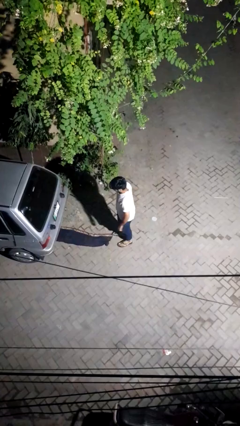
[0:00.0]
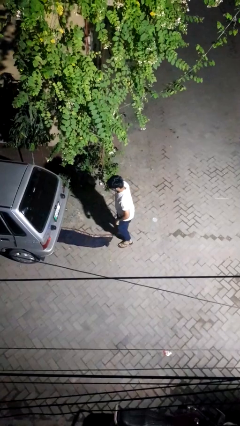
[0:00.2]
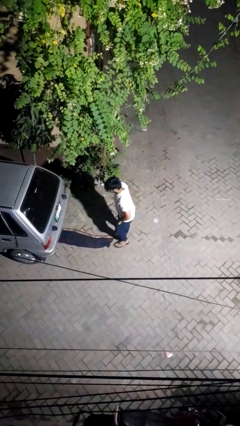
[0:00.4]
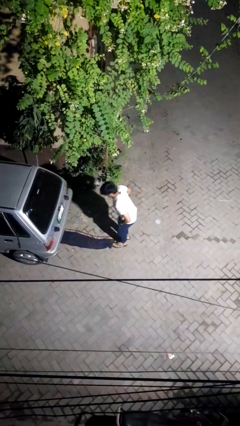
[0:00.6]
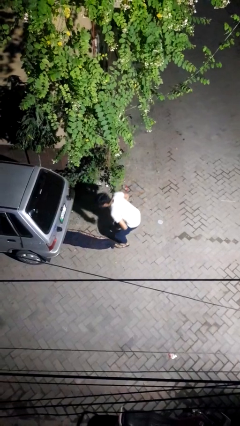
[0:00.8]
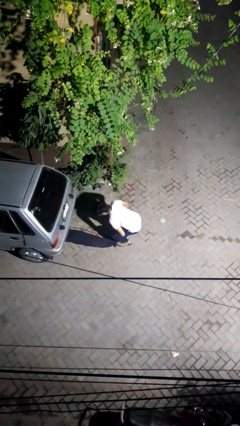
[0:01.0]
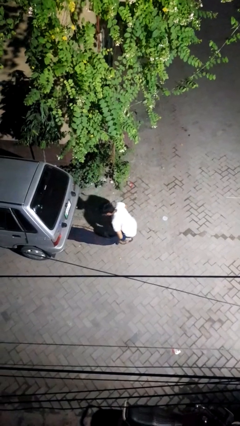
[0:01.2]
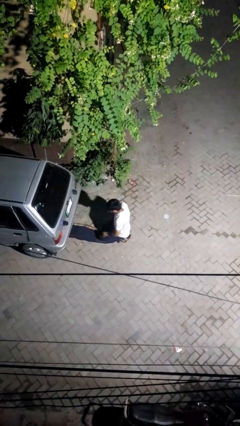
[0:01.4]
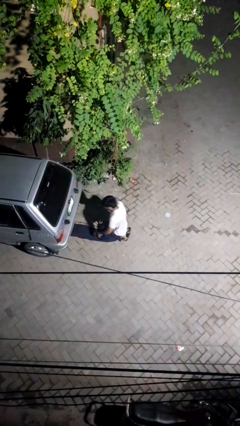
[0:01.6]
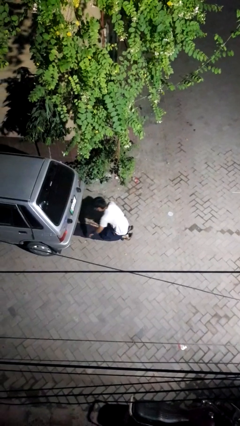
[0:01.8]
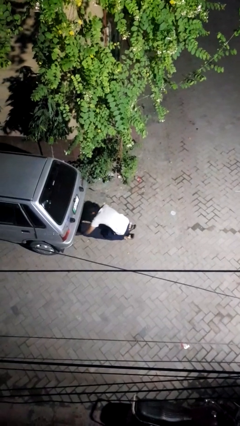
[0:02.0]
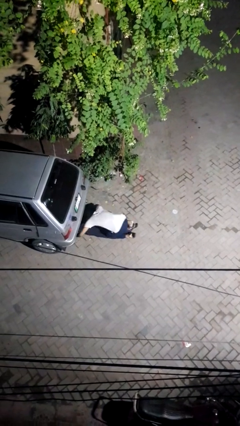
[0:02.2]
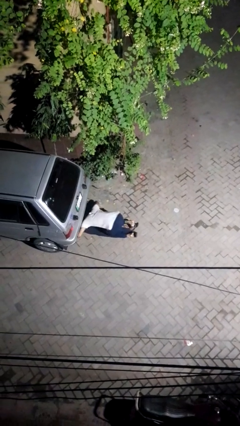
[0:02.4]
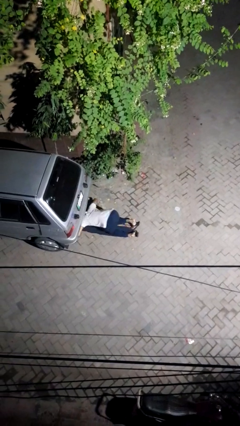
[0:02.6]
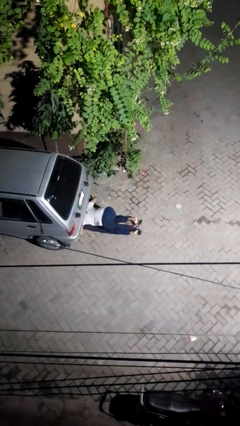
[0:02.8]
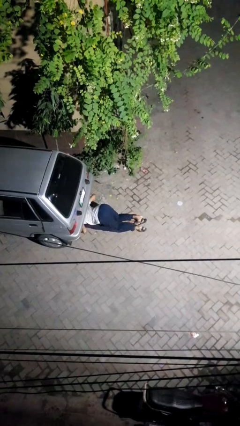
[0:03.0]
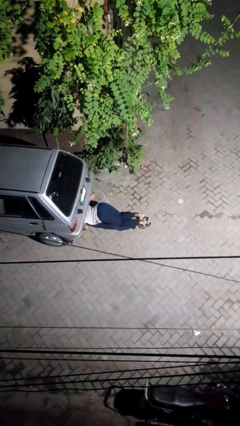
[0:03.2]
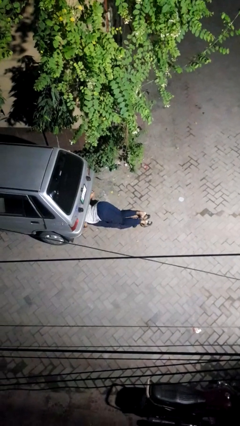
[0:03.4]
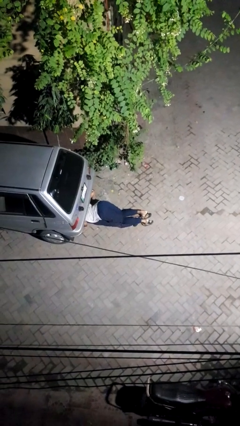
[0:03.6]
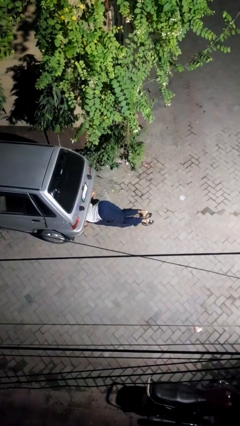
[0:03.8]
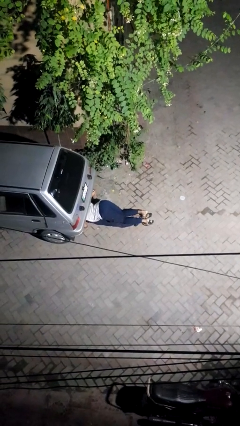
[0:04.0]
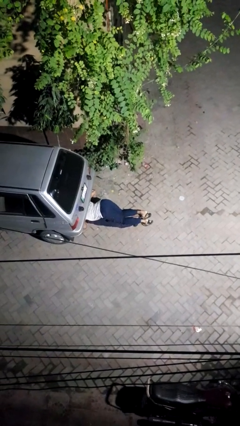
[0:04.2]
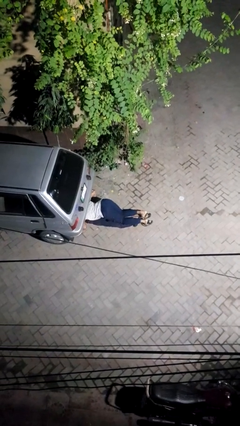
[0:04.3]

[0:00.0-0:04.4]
person crawls out from under vehicle

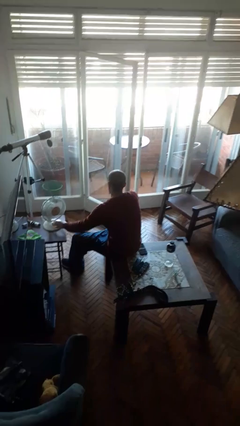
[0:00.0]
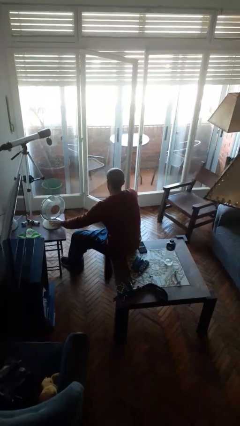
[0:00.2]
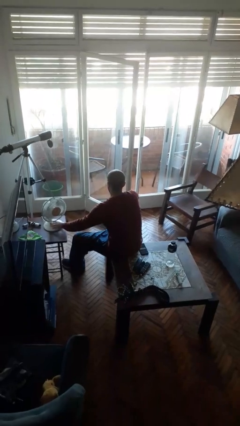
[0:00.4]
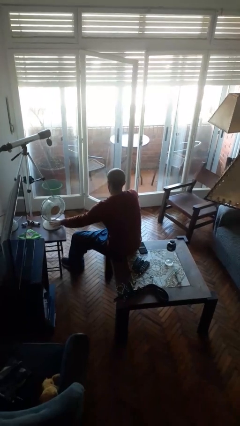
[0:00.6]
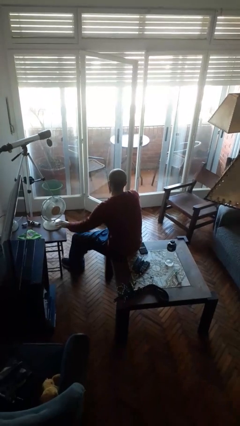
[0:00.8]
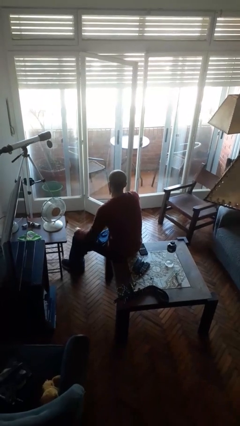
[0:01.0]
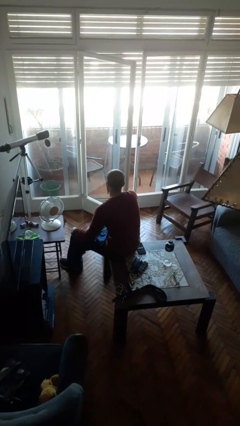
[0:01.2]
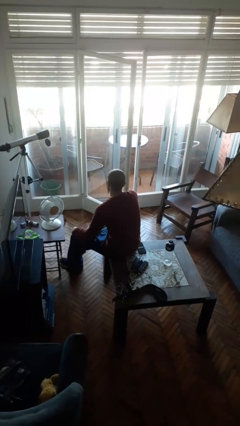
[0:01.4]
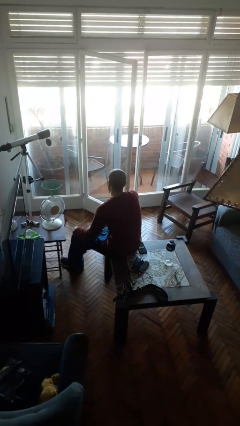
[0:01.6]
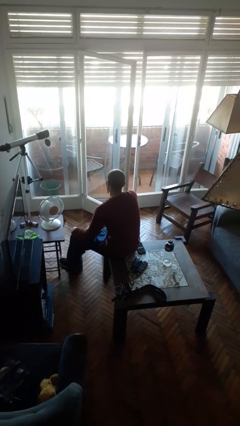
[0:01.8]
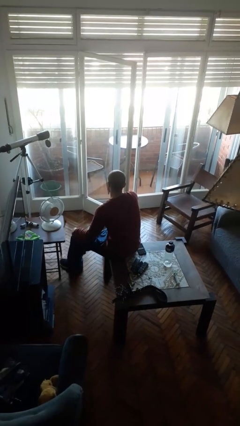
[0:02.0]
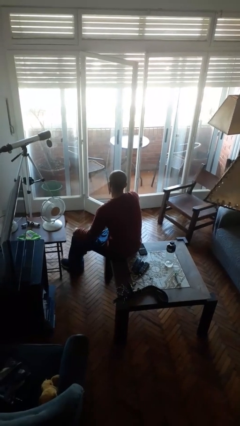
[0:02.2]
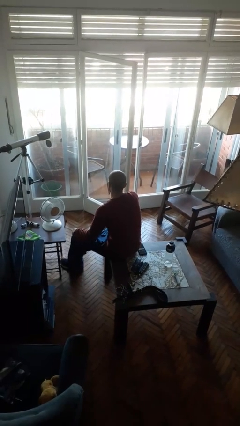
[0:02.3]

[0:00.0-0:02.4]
person turns on fan

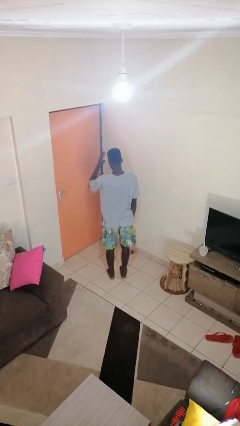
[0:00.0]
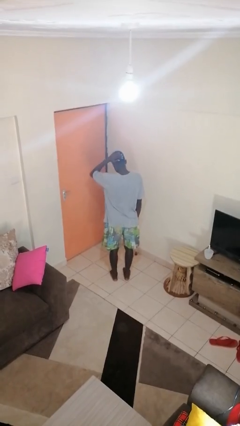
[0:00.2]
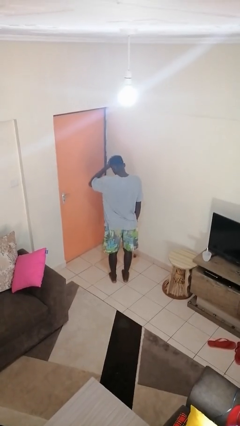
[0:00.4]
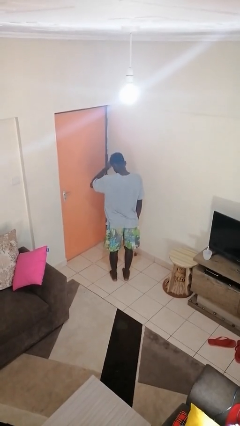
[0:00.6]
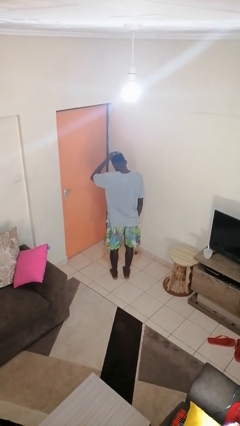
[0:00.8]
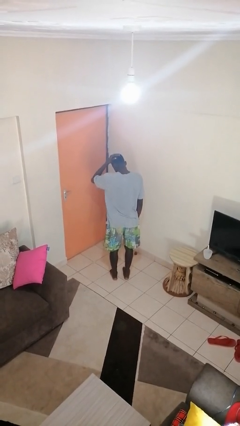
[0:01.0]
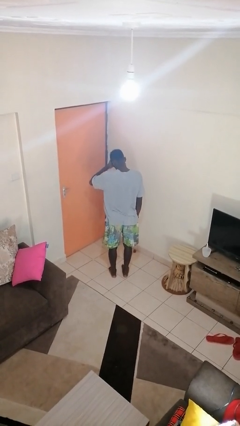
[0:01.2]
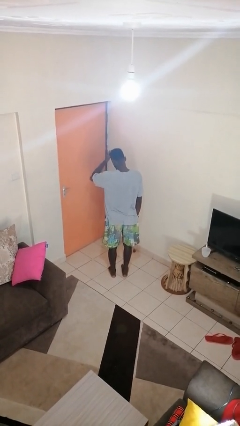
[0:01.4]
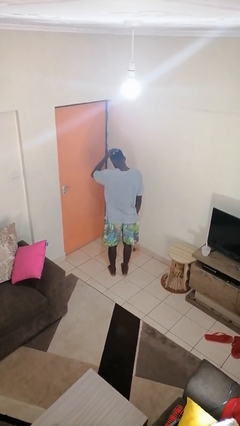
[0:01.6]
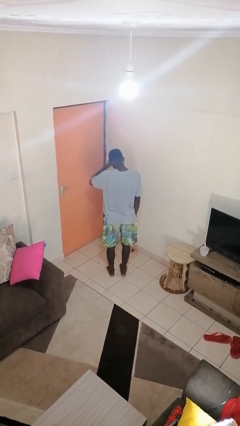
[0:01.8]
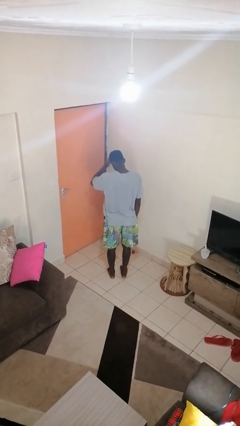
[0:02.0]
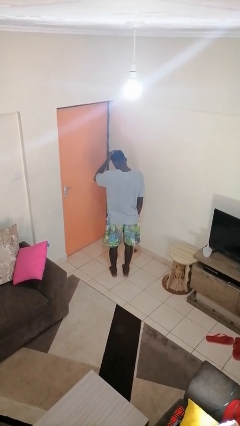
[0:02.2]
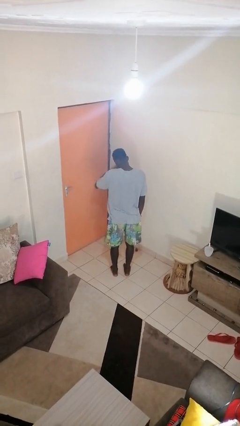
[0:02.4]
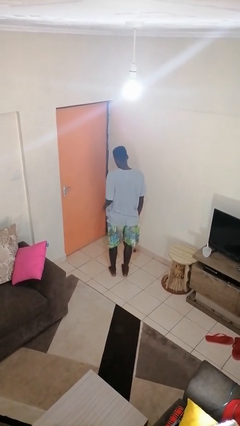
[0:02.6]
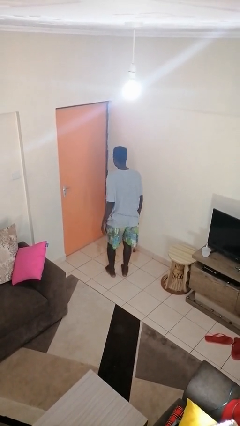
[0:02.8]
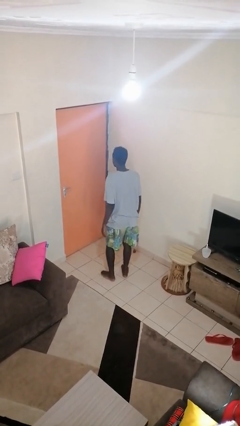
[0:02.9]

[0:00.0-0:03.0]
person strokes hair

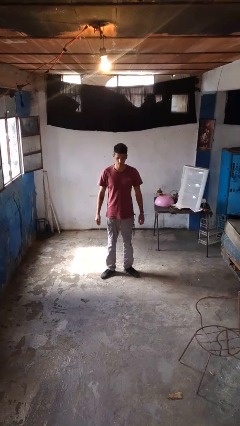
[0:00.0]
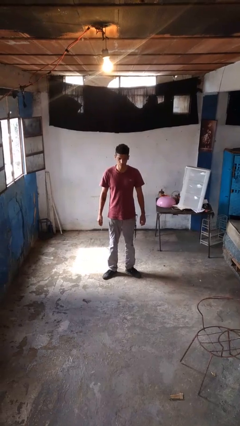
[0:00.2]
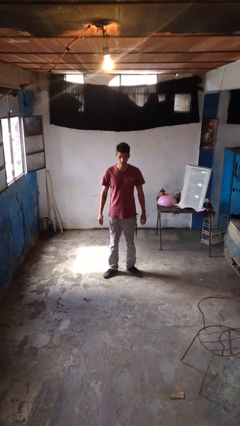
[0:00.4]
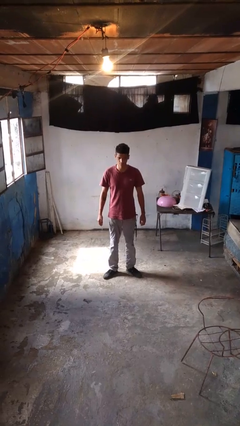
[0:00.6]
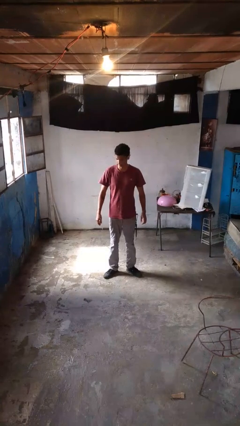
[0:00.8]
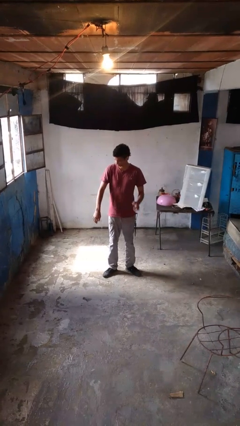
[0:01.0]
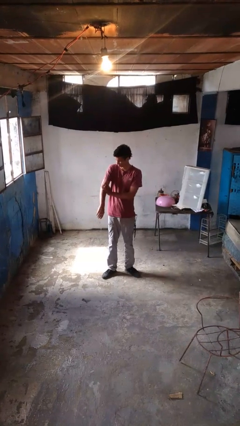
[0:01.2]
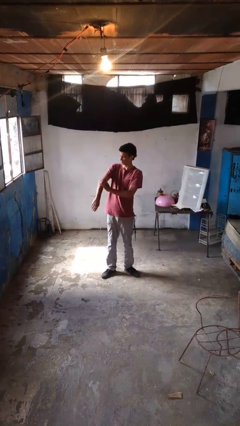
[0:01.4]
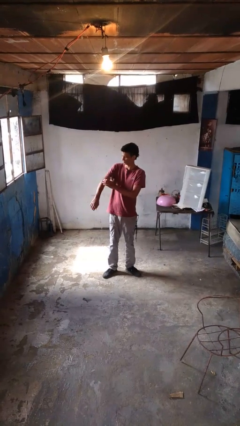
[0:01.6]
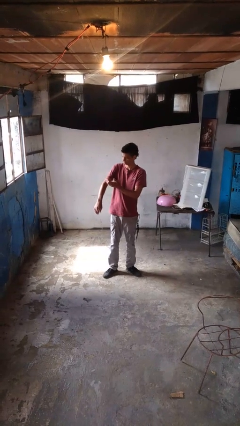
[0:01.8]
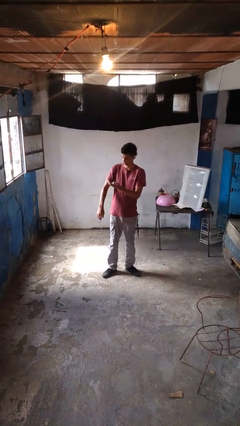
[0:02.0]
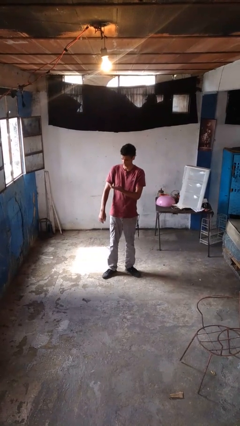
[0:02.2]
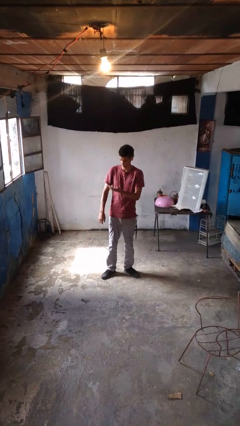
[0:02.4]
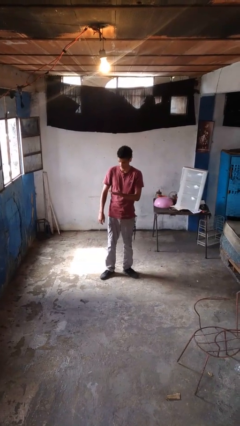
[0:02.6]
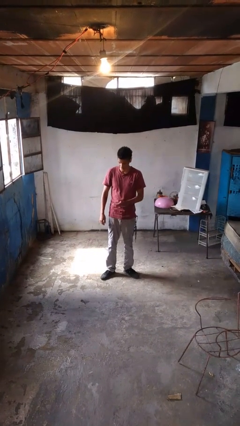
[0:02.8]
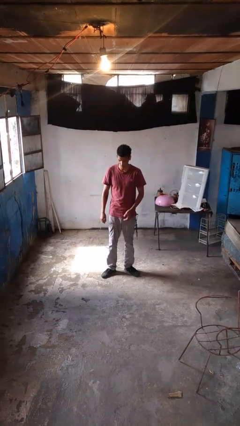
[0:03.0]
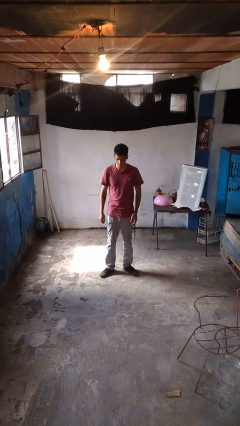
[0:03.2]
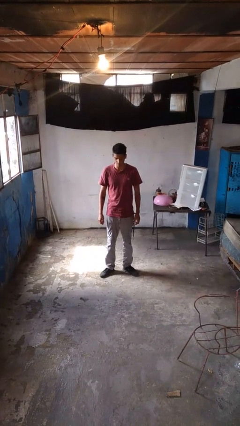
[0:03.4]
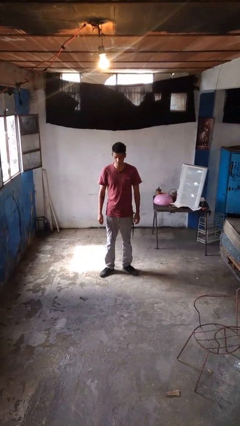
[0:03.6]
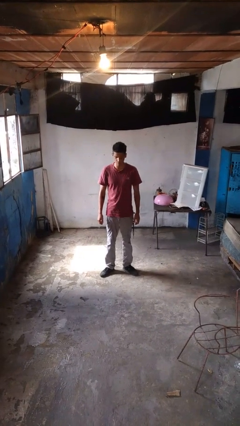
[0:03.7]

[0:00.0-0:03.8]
person swats bug

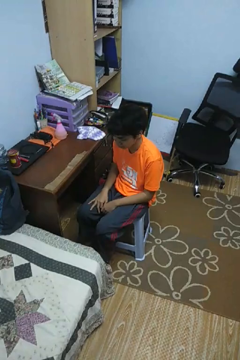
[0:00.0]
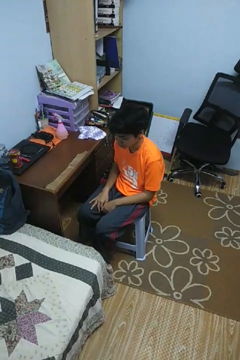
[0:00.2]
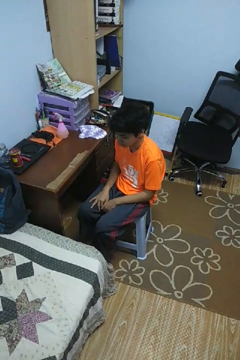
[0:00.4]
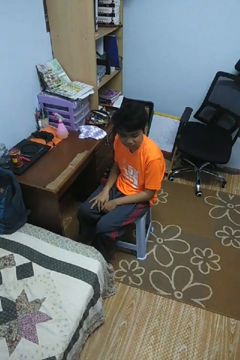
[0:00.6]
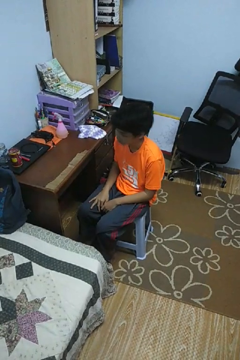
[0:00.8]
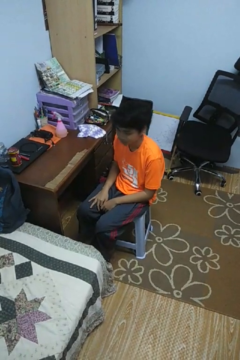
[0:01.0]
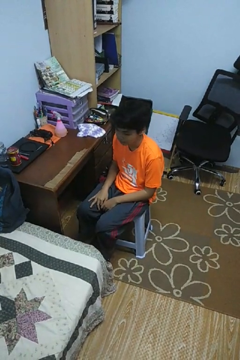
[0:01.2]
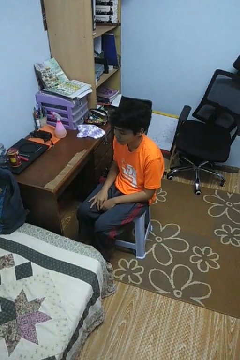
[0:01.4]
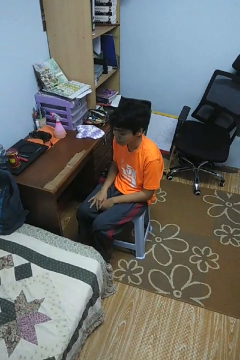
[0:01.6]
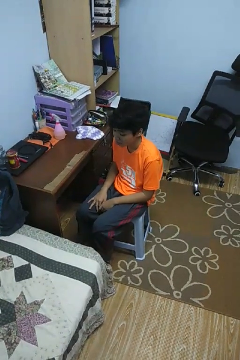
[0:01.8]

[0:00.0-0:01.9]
person shakes head

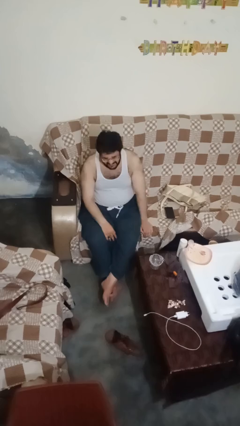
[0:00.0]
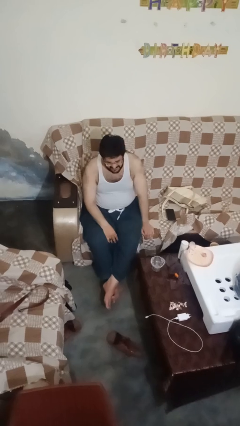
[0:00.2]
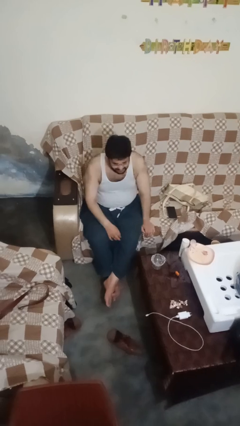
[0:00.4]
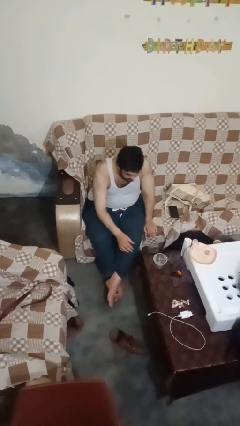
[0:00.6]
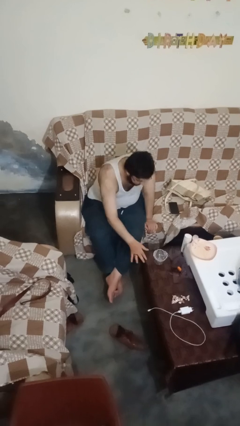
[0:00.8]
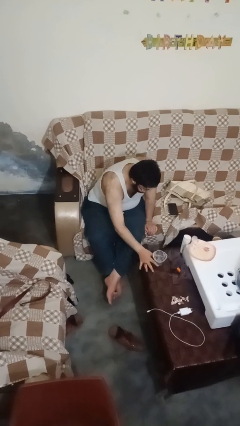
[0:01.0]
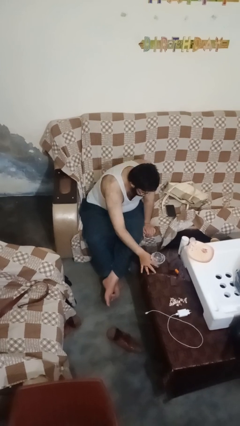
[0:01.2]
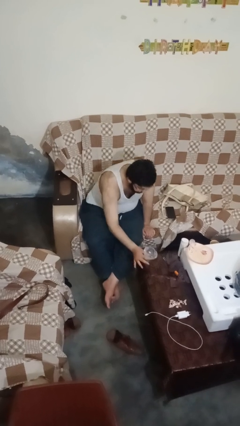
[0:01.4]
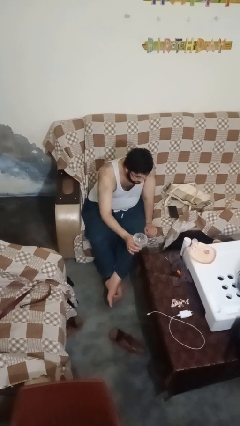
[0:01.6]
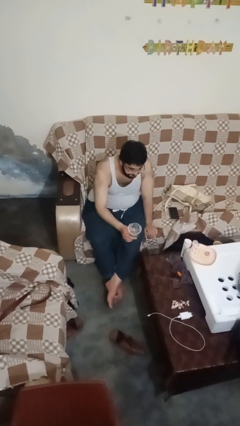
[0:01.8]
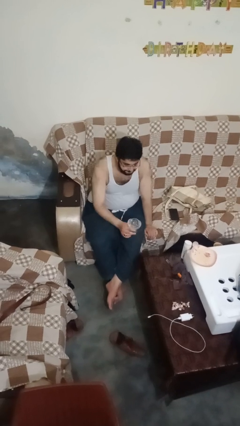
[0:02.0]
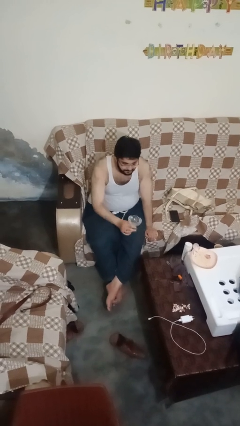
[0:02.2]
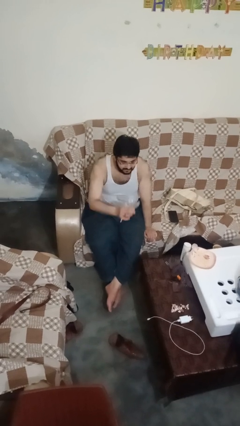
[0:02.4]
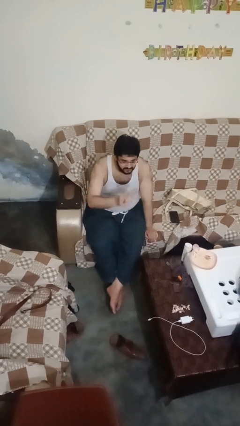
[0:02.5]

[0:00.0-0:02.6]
person picks up object from table
